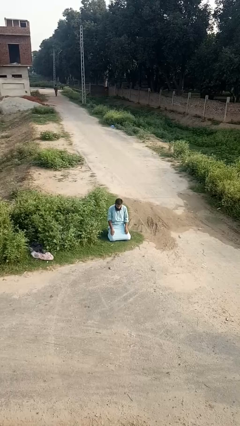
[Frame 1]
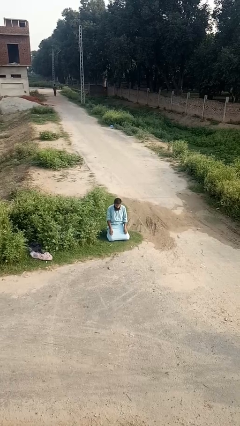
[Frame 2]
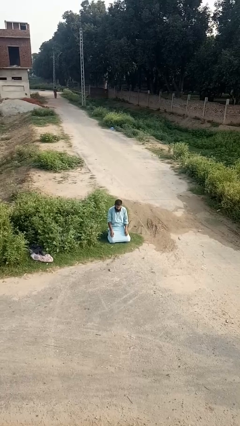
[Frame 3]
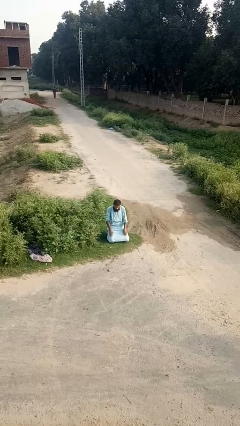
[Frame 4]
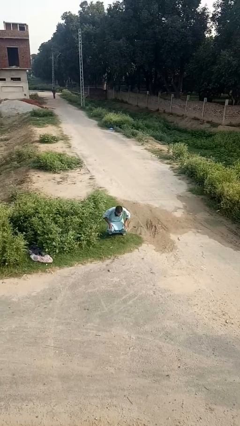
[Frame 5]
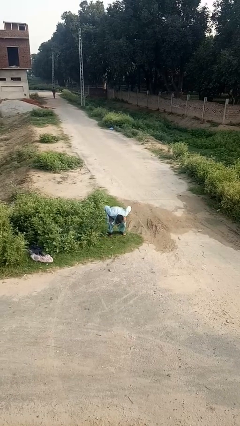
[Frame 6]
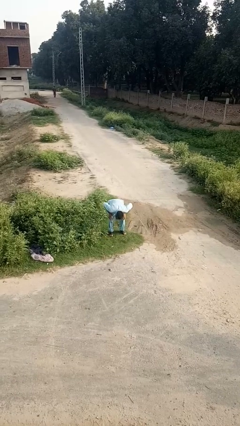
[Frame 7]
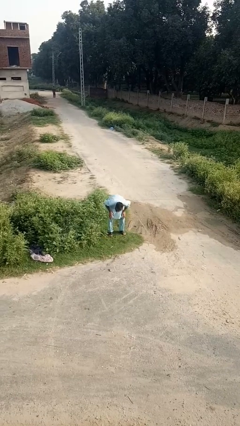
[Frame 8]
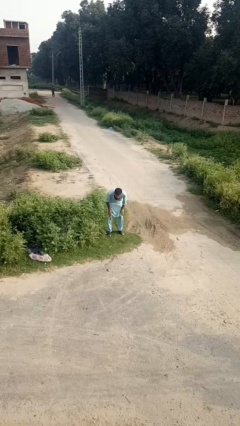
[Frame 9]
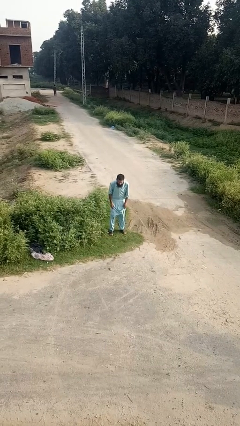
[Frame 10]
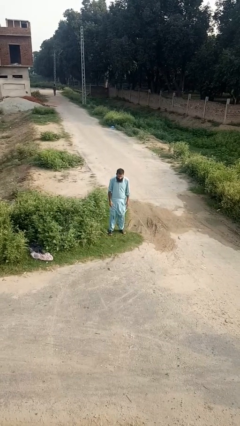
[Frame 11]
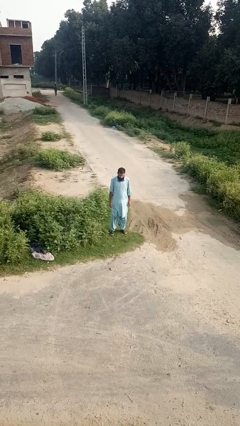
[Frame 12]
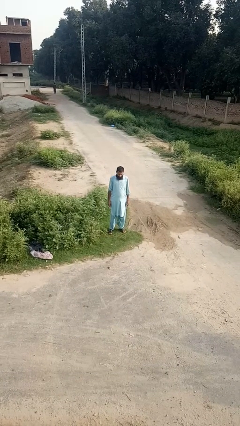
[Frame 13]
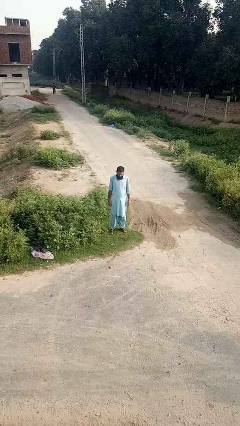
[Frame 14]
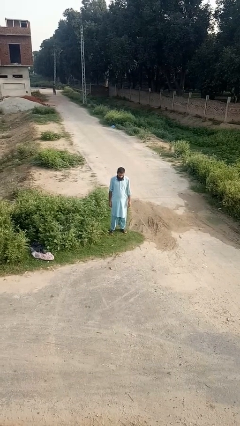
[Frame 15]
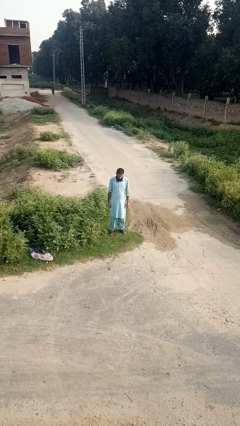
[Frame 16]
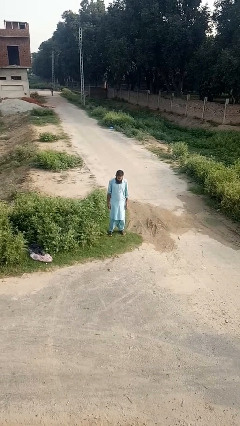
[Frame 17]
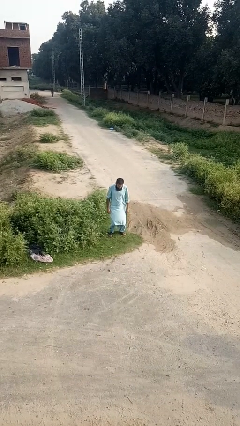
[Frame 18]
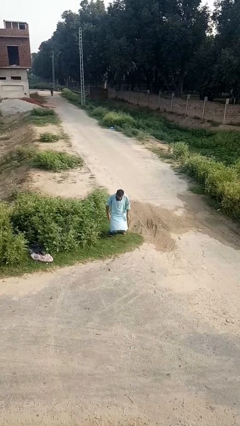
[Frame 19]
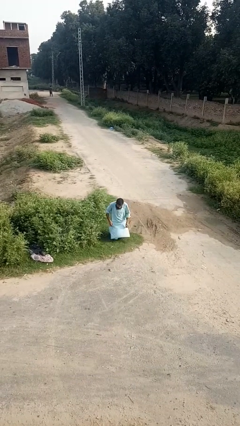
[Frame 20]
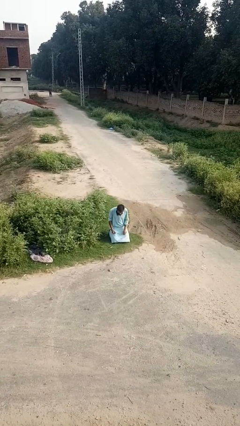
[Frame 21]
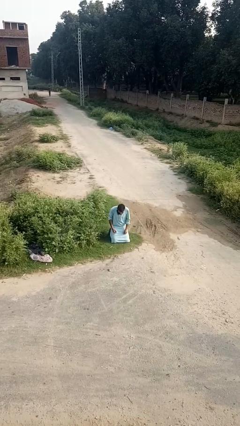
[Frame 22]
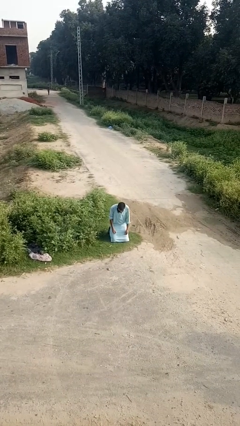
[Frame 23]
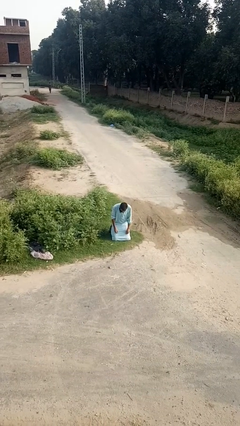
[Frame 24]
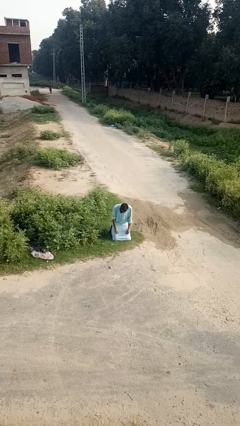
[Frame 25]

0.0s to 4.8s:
person stands up from floor

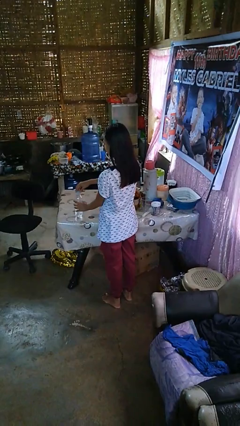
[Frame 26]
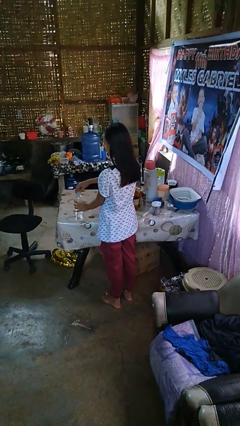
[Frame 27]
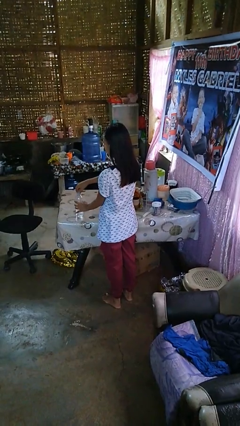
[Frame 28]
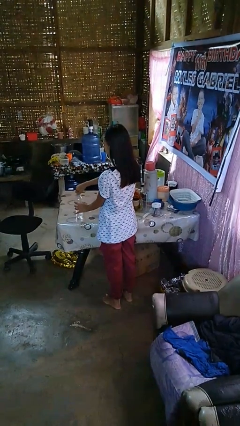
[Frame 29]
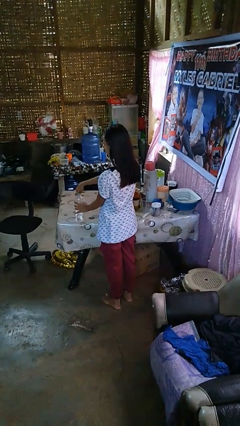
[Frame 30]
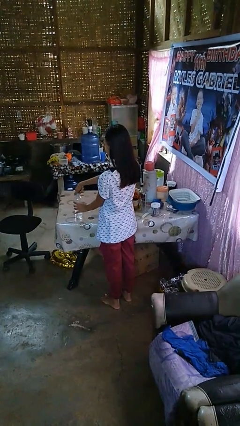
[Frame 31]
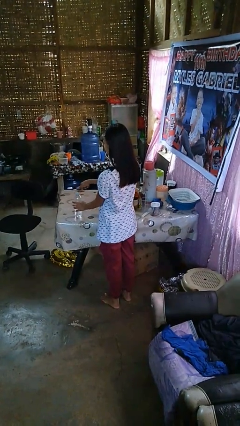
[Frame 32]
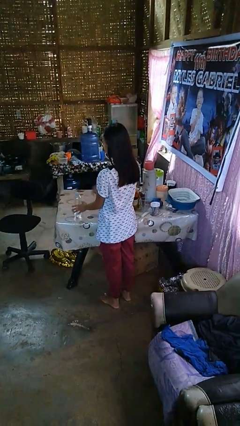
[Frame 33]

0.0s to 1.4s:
person screws lid to bottle

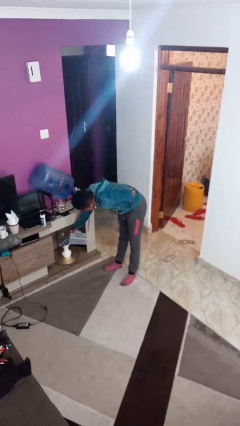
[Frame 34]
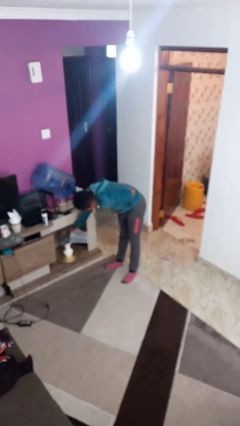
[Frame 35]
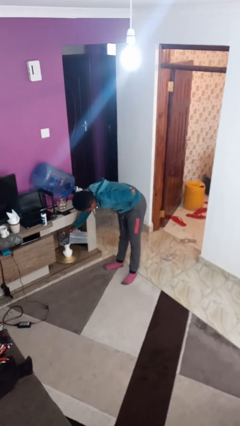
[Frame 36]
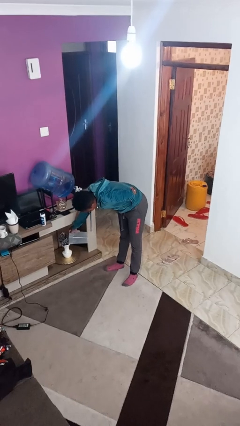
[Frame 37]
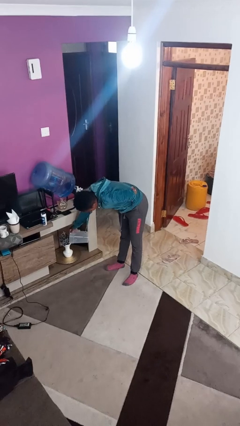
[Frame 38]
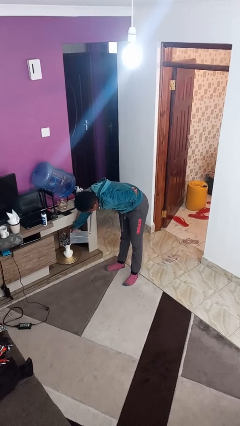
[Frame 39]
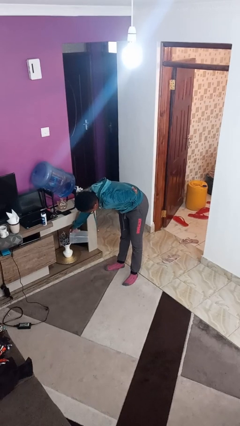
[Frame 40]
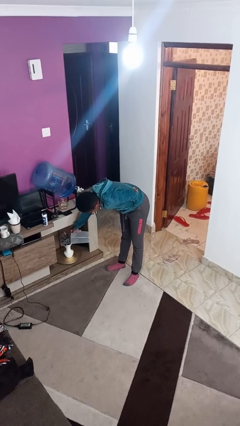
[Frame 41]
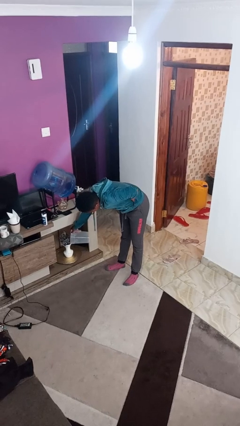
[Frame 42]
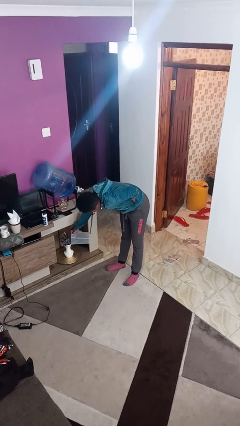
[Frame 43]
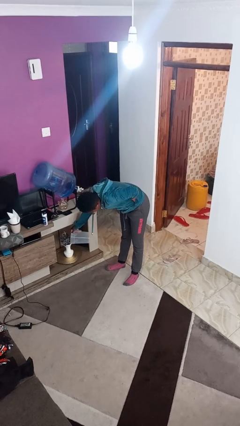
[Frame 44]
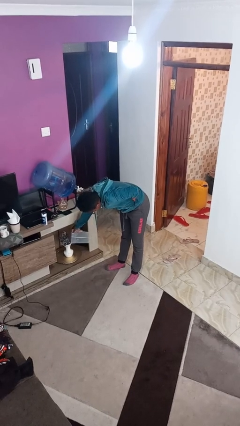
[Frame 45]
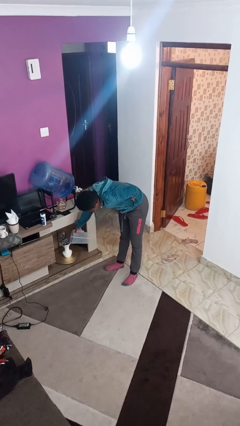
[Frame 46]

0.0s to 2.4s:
person waters houseplant

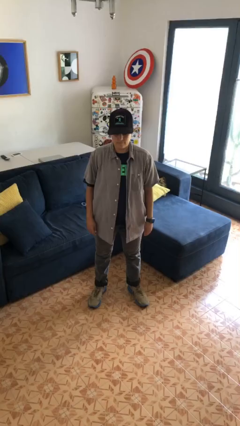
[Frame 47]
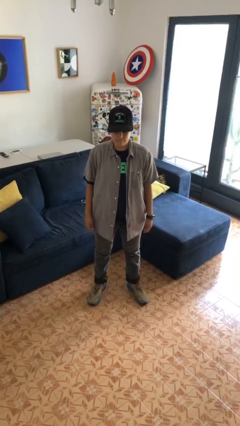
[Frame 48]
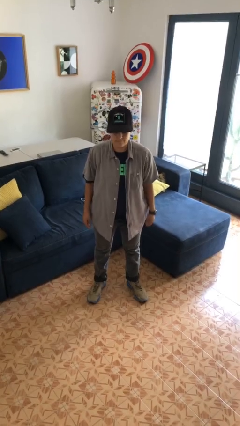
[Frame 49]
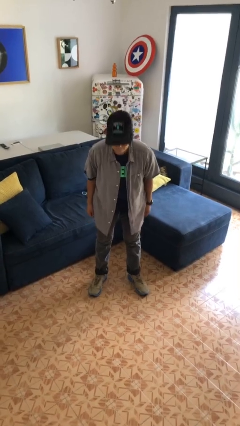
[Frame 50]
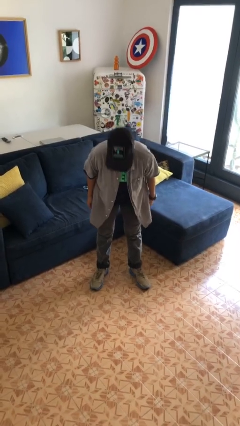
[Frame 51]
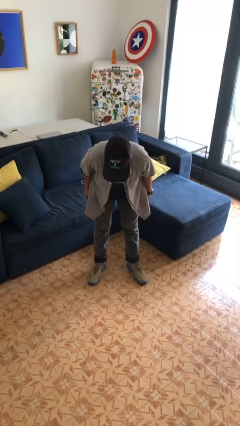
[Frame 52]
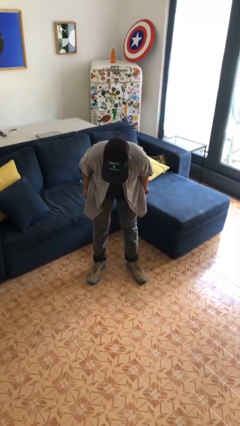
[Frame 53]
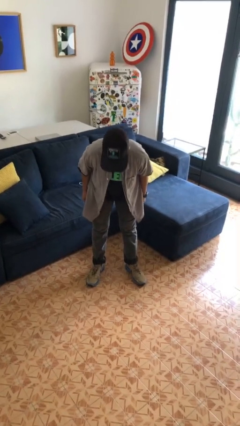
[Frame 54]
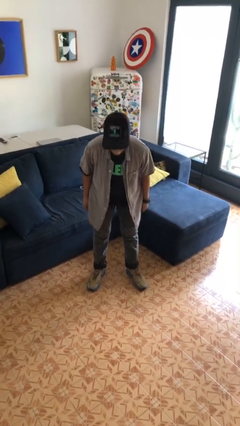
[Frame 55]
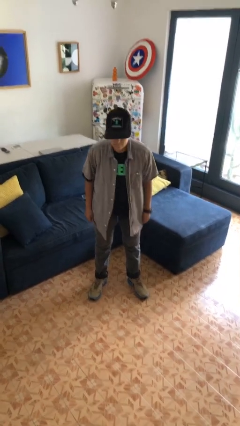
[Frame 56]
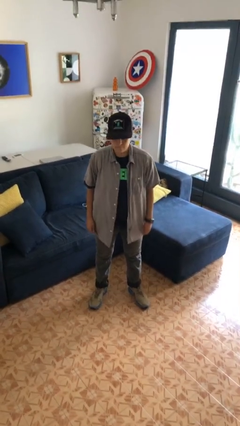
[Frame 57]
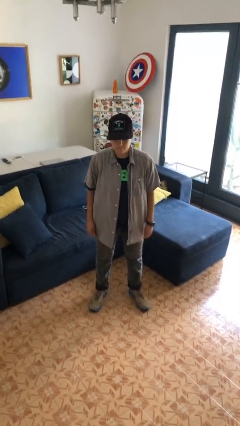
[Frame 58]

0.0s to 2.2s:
person bows

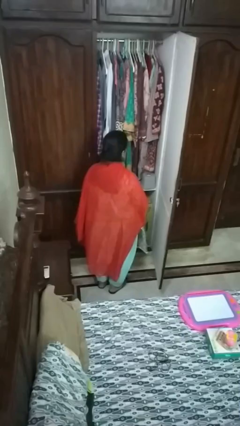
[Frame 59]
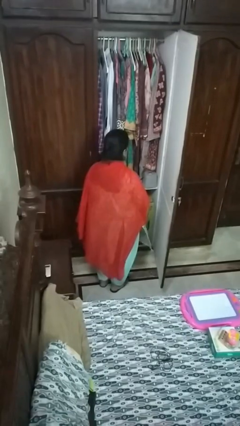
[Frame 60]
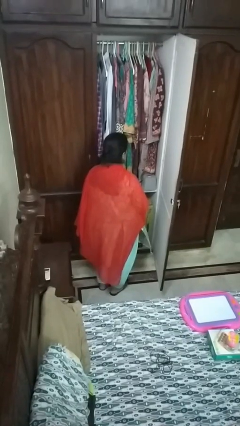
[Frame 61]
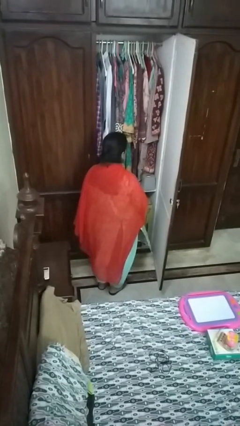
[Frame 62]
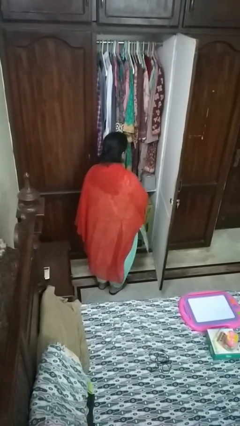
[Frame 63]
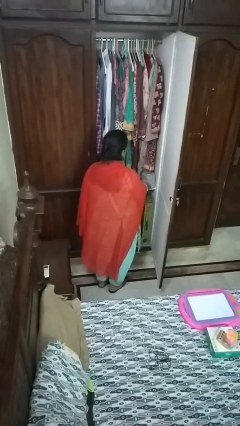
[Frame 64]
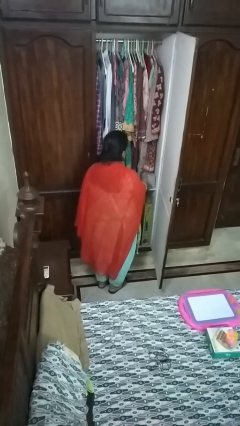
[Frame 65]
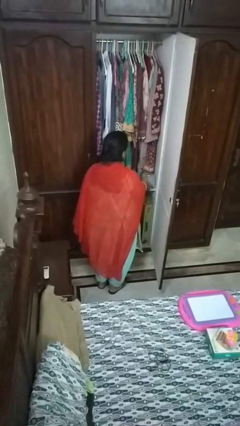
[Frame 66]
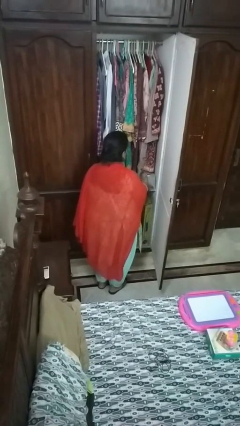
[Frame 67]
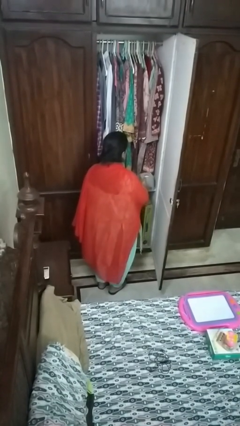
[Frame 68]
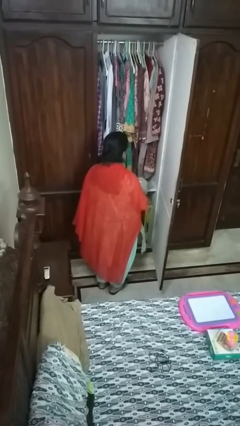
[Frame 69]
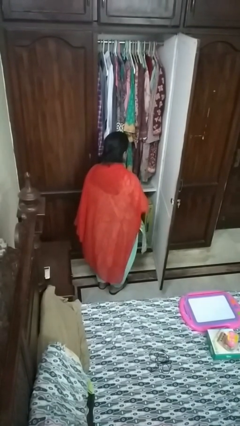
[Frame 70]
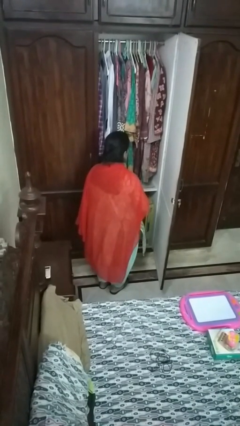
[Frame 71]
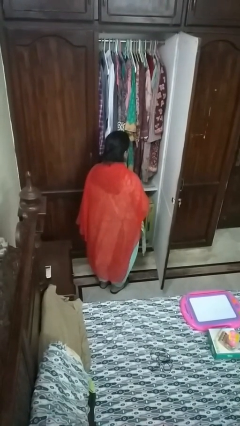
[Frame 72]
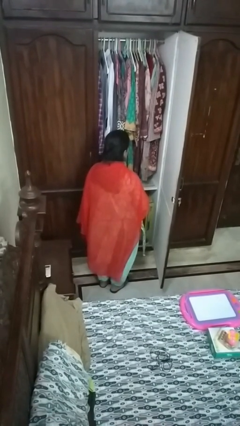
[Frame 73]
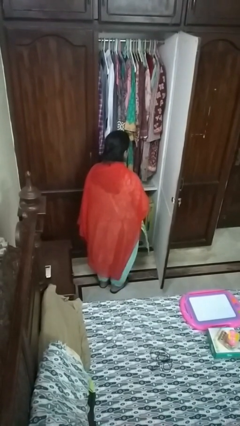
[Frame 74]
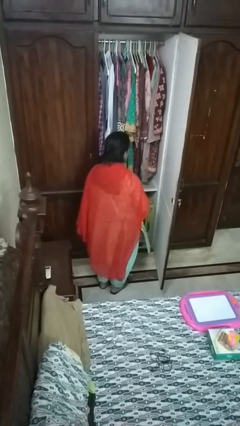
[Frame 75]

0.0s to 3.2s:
person picks up object from cabinet

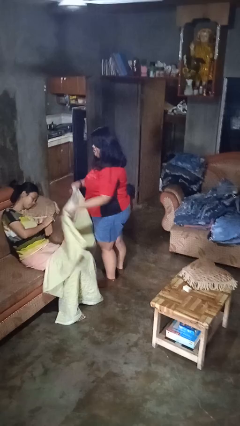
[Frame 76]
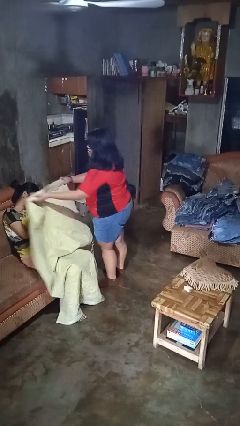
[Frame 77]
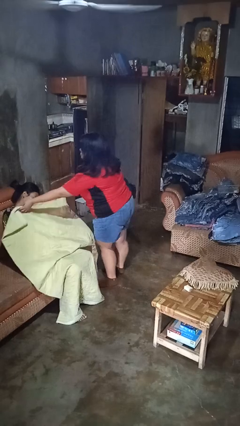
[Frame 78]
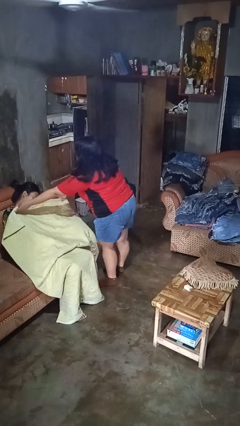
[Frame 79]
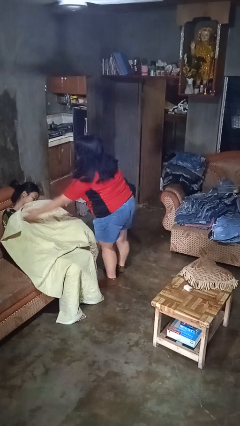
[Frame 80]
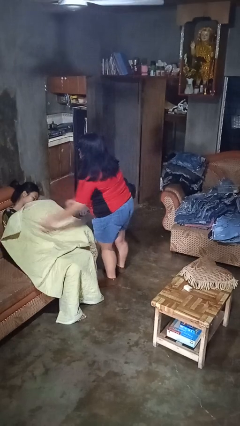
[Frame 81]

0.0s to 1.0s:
person covers friend with blanket

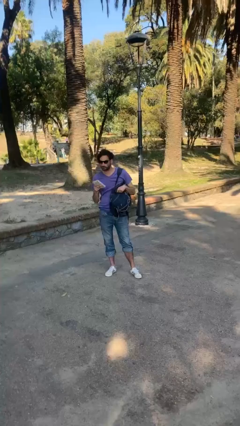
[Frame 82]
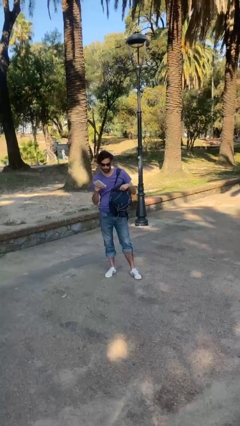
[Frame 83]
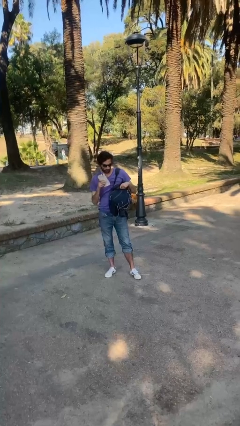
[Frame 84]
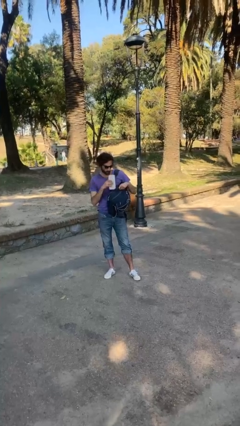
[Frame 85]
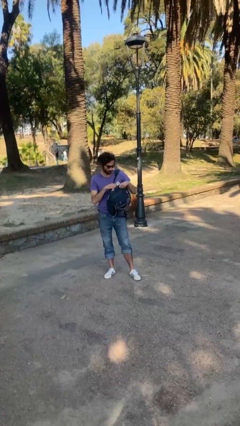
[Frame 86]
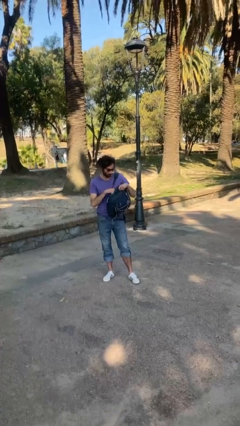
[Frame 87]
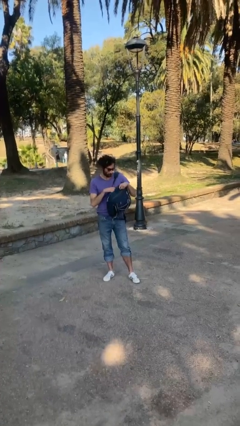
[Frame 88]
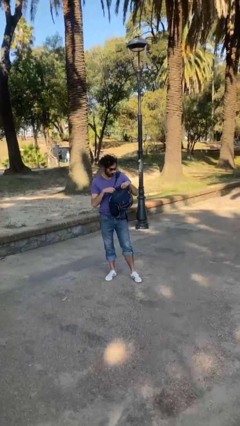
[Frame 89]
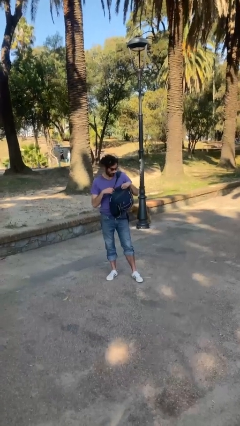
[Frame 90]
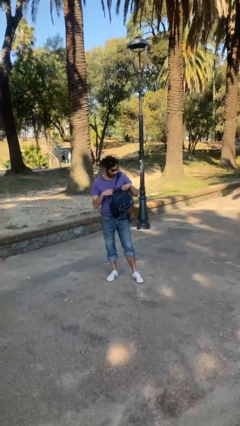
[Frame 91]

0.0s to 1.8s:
person puts object into backpack

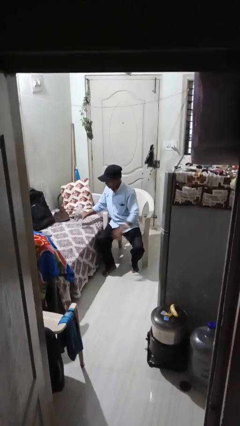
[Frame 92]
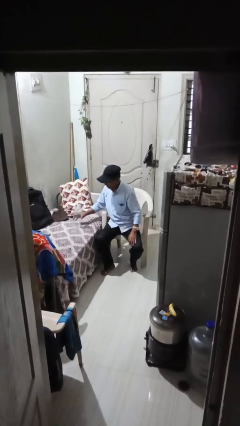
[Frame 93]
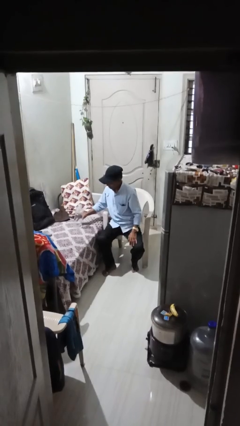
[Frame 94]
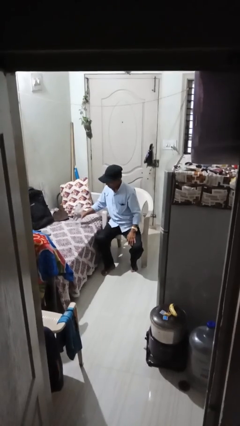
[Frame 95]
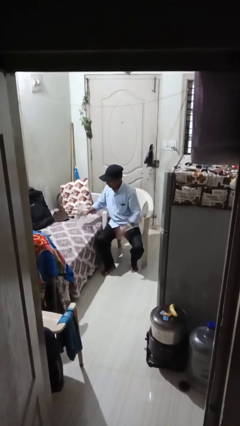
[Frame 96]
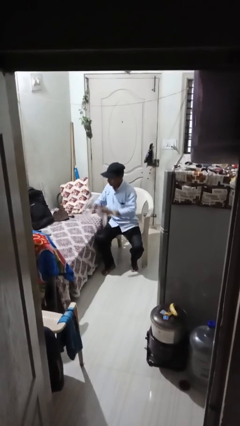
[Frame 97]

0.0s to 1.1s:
person drinks from bottle
